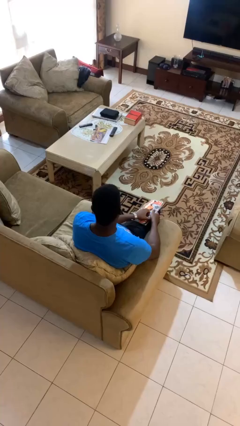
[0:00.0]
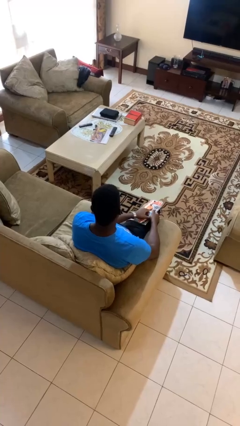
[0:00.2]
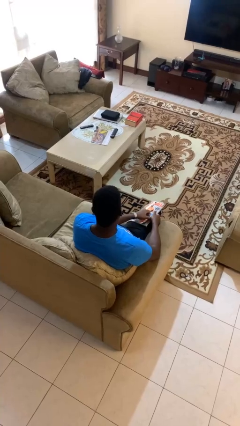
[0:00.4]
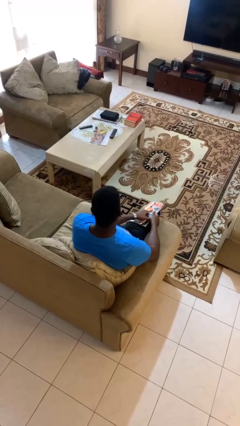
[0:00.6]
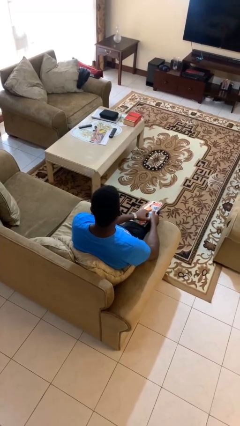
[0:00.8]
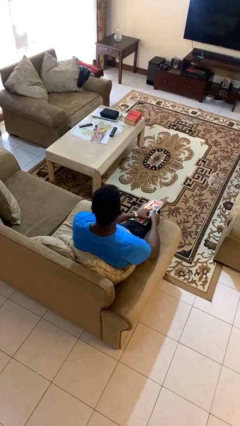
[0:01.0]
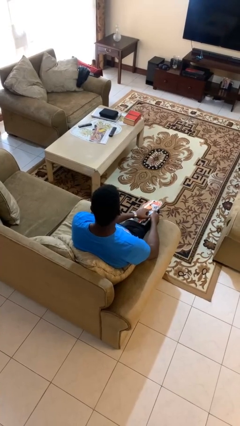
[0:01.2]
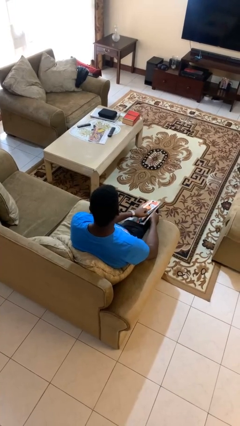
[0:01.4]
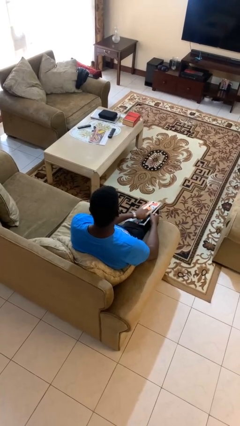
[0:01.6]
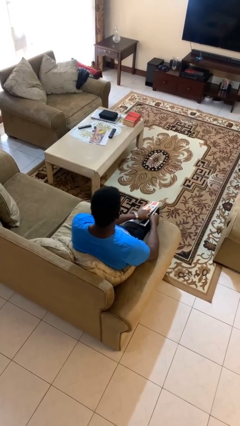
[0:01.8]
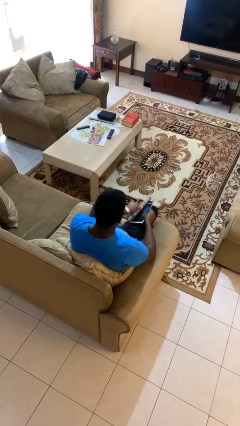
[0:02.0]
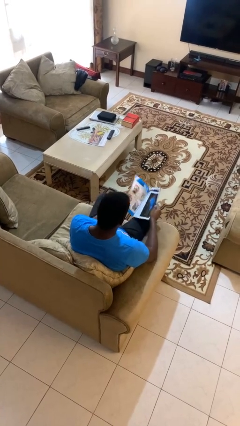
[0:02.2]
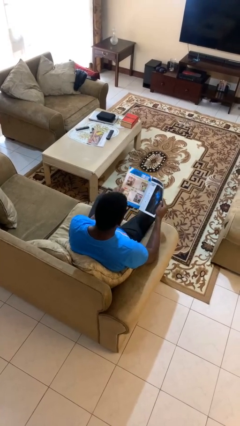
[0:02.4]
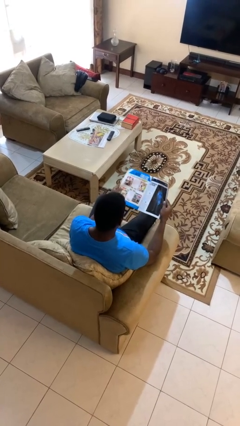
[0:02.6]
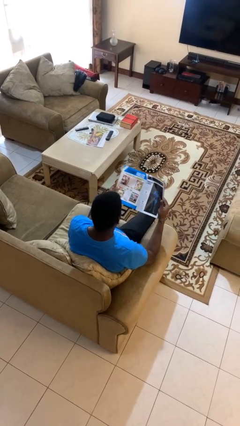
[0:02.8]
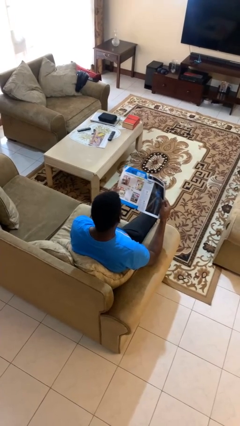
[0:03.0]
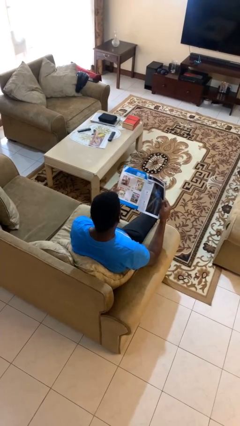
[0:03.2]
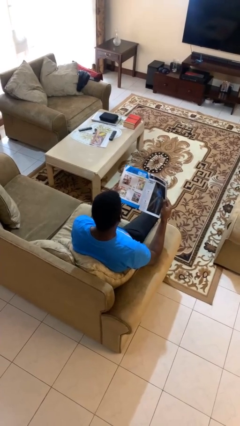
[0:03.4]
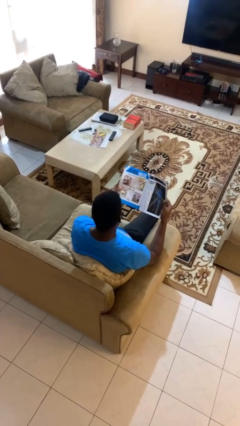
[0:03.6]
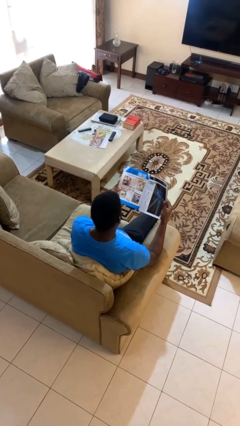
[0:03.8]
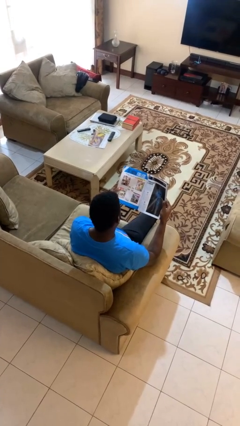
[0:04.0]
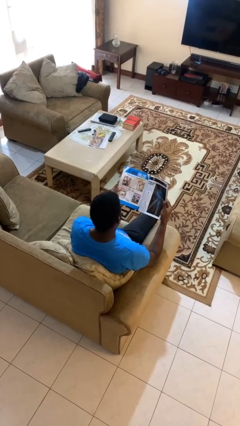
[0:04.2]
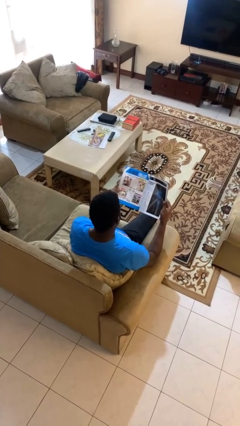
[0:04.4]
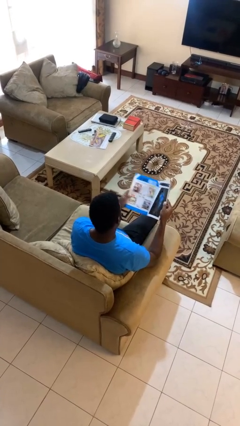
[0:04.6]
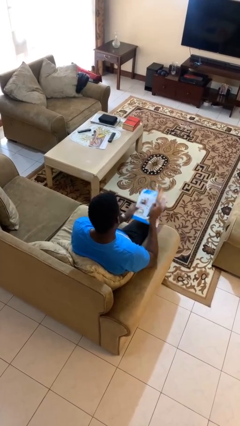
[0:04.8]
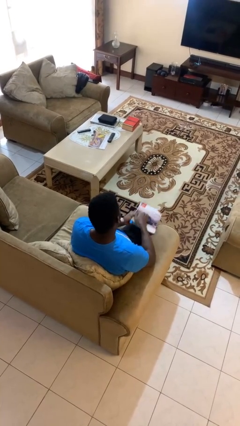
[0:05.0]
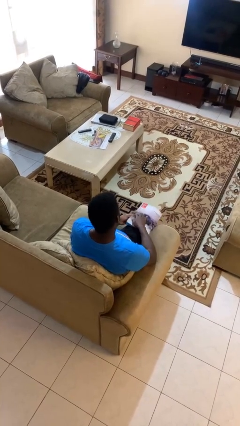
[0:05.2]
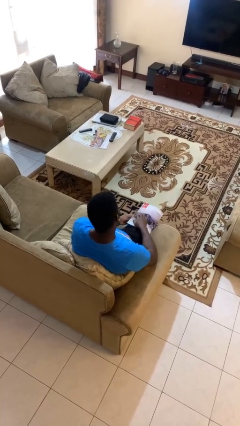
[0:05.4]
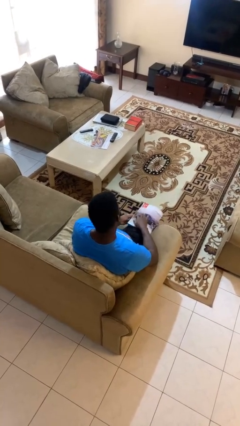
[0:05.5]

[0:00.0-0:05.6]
person reads magazine

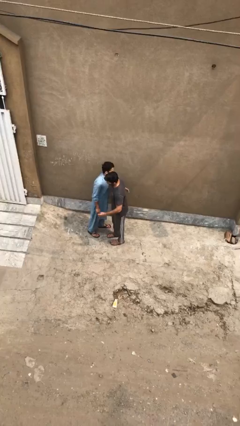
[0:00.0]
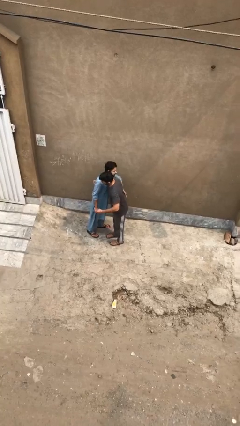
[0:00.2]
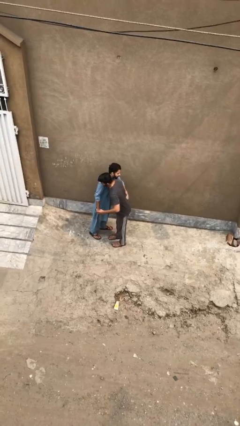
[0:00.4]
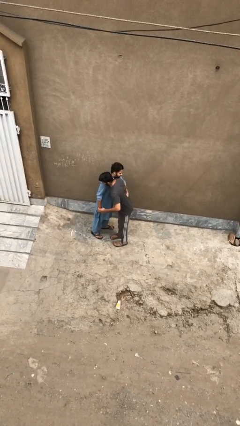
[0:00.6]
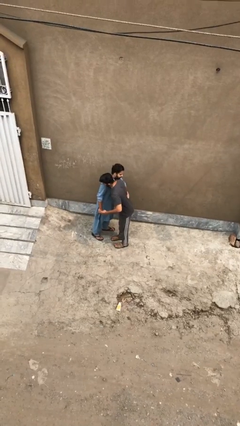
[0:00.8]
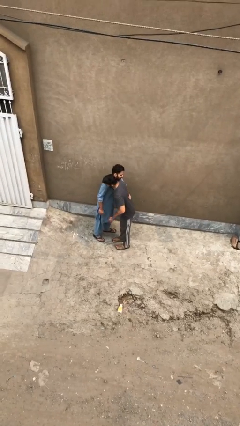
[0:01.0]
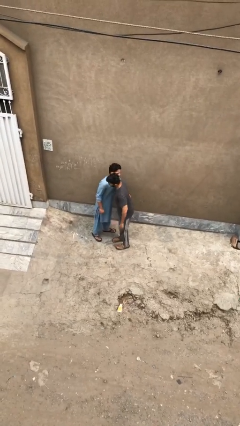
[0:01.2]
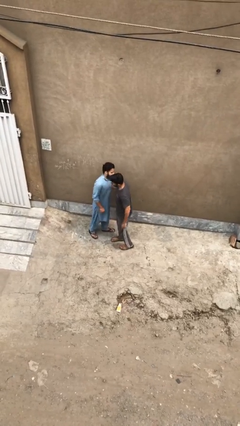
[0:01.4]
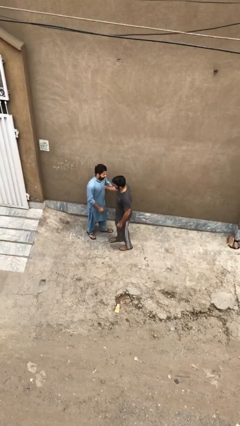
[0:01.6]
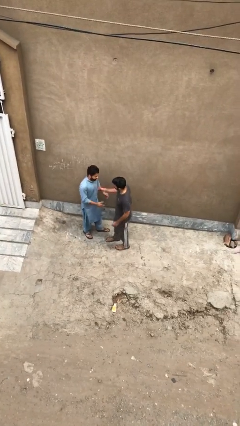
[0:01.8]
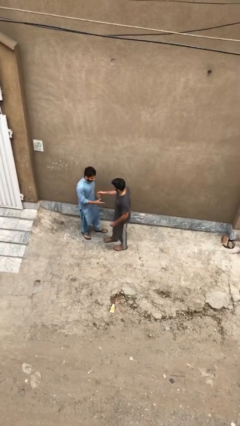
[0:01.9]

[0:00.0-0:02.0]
person embraces person

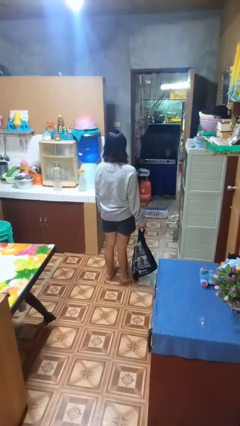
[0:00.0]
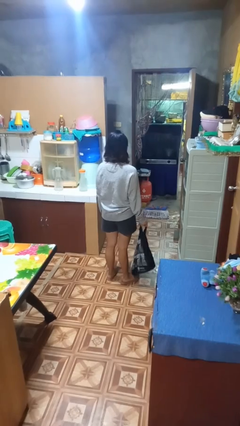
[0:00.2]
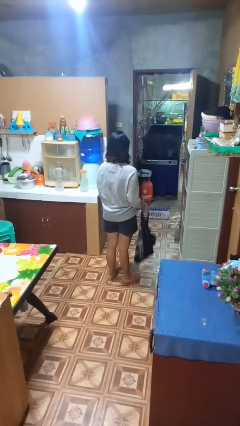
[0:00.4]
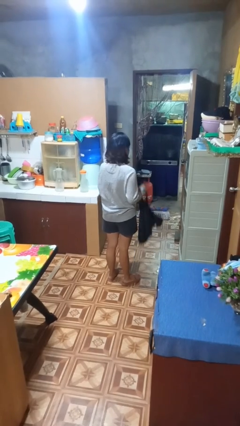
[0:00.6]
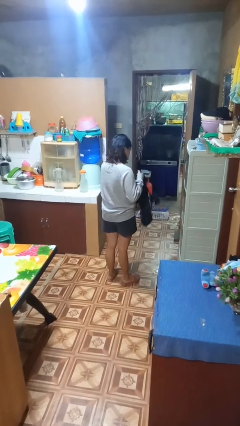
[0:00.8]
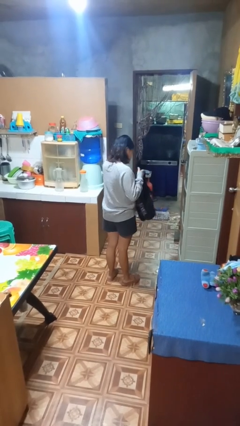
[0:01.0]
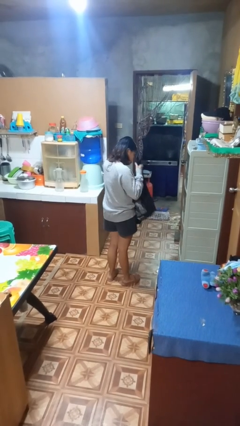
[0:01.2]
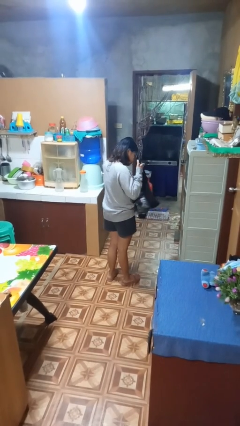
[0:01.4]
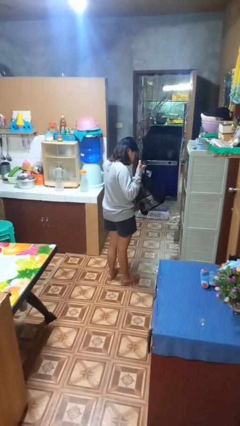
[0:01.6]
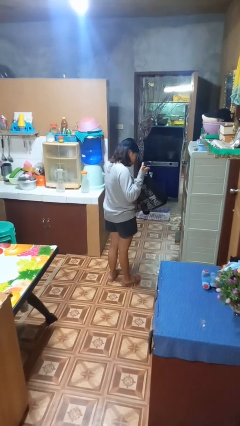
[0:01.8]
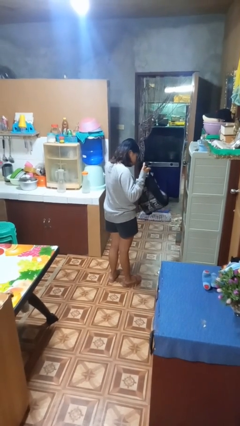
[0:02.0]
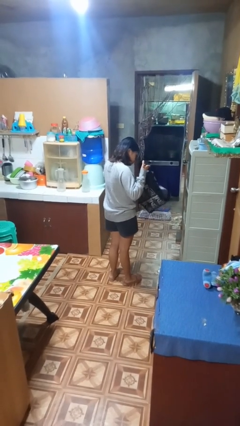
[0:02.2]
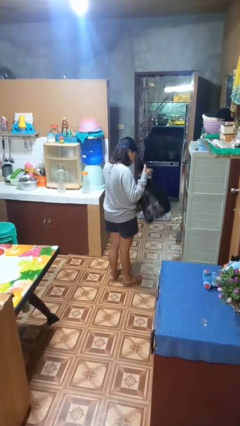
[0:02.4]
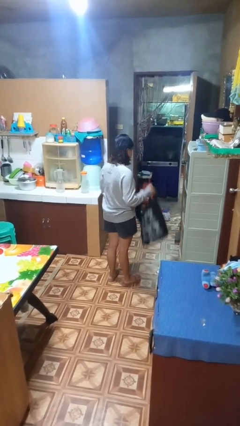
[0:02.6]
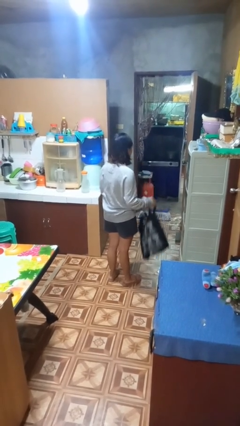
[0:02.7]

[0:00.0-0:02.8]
person searches in bag

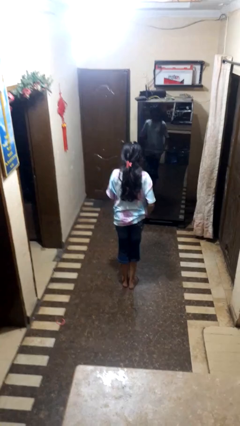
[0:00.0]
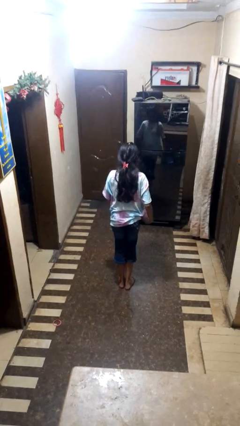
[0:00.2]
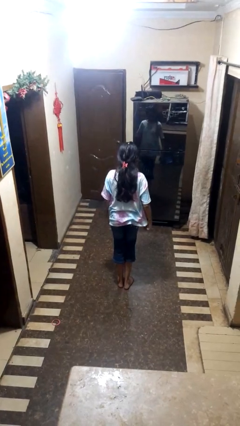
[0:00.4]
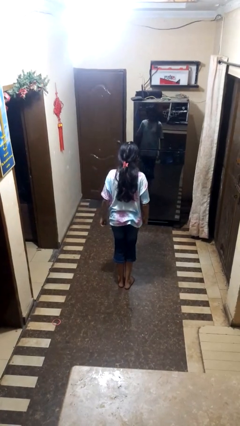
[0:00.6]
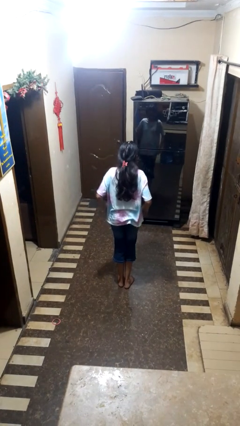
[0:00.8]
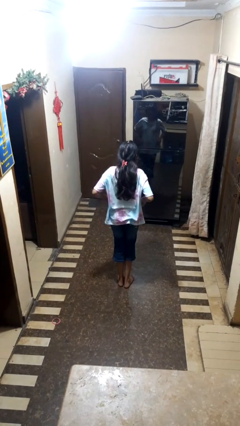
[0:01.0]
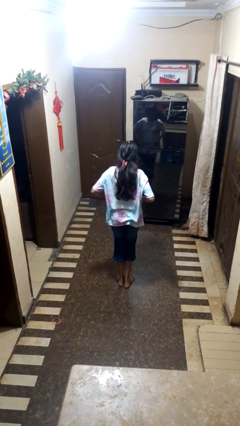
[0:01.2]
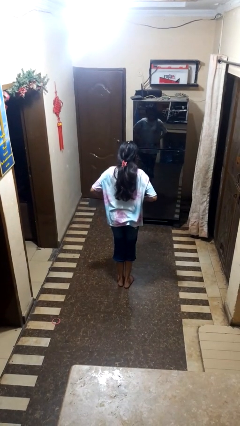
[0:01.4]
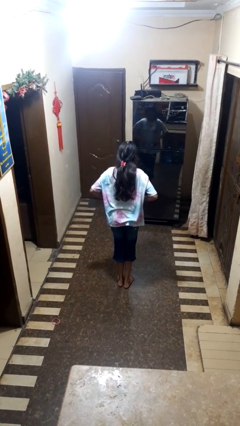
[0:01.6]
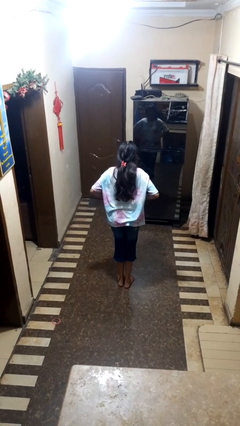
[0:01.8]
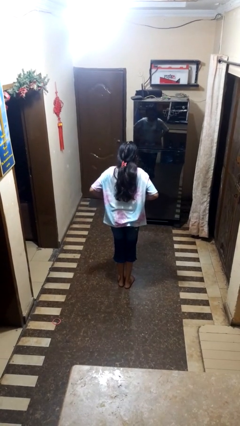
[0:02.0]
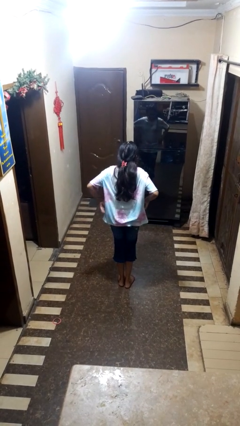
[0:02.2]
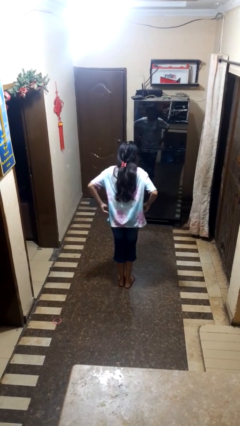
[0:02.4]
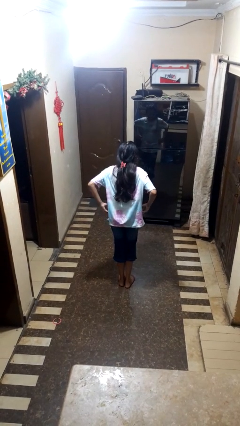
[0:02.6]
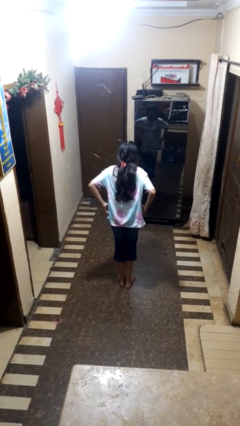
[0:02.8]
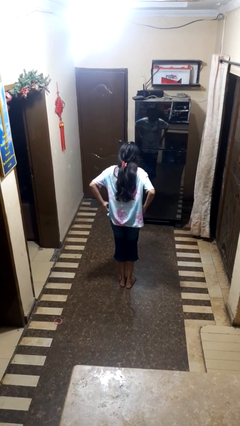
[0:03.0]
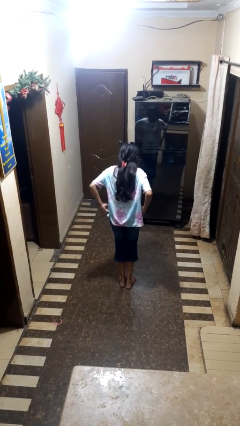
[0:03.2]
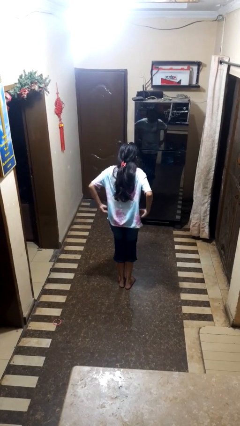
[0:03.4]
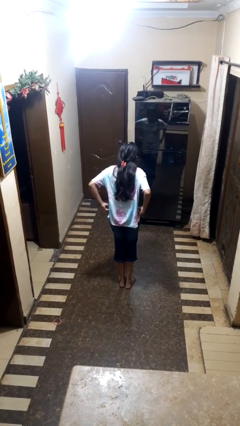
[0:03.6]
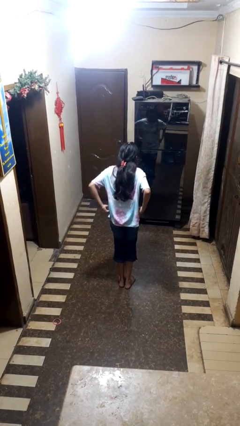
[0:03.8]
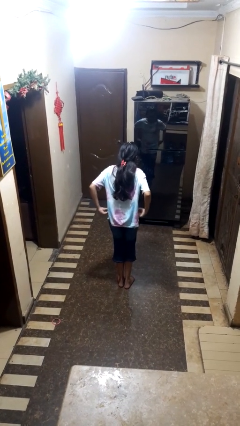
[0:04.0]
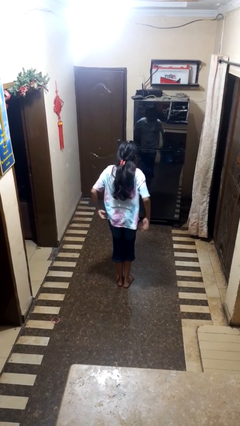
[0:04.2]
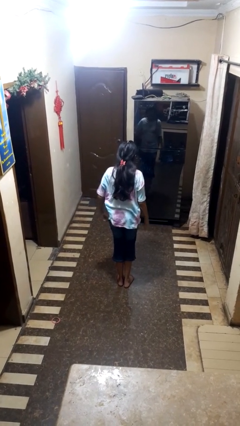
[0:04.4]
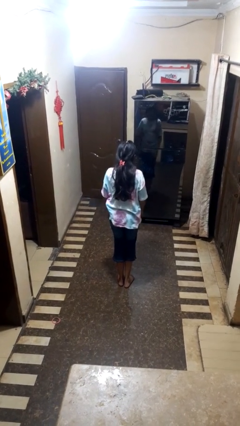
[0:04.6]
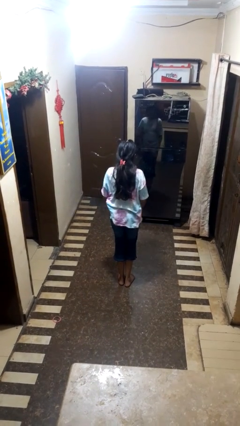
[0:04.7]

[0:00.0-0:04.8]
person hikes up pants

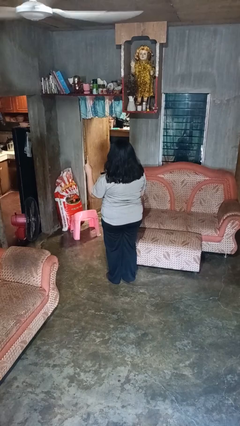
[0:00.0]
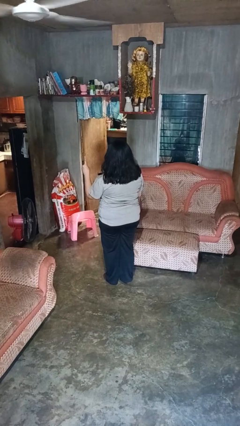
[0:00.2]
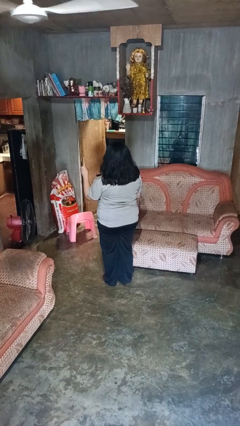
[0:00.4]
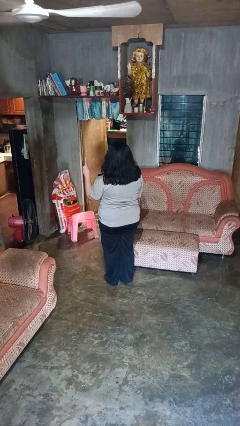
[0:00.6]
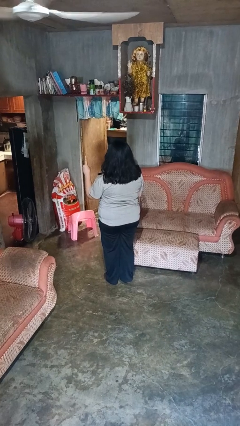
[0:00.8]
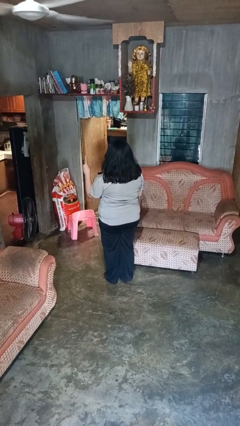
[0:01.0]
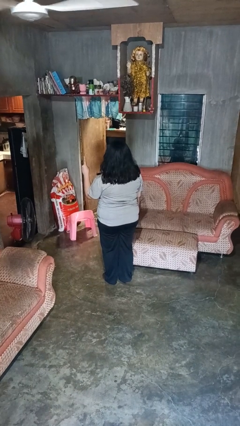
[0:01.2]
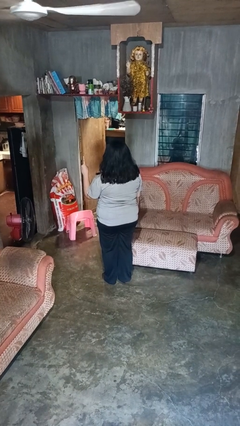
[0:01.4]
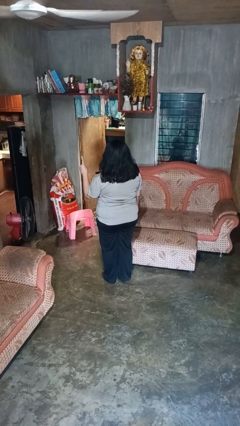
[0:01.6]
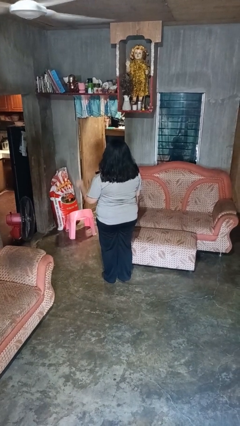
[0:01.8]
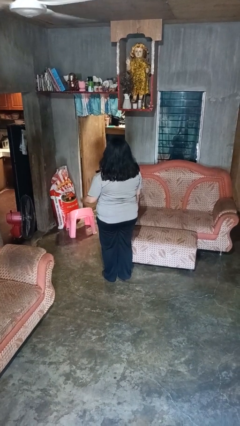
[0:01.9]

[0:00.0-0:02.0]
person gestures number one

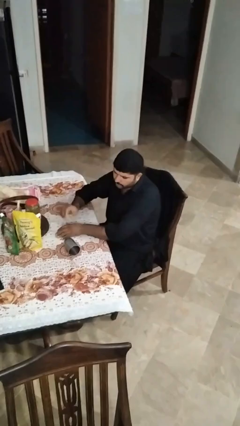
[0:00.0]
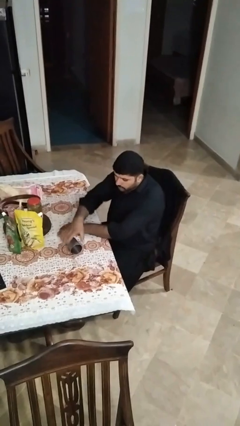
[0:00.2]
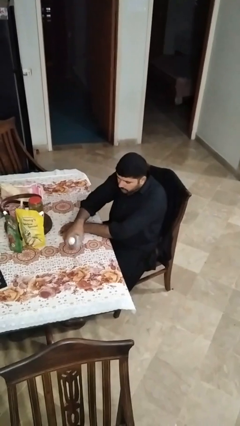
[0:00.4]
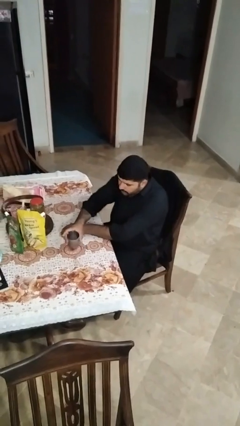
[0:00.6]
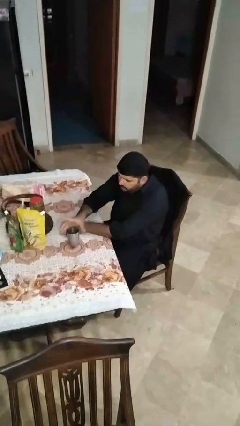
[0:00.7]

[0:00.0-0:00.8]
person sets upright glass
